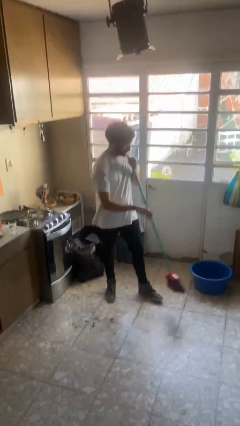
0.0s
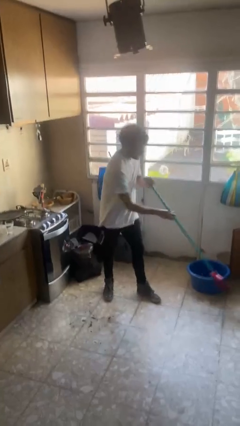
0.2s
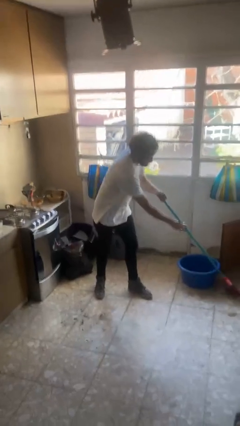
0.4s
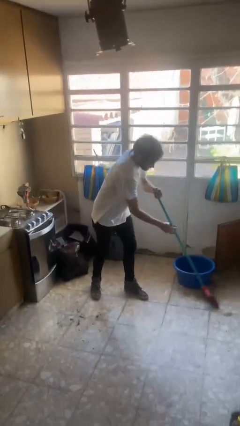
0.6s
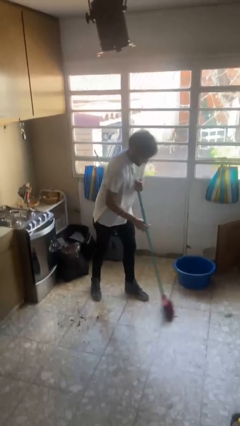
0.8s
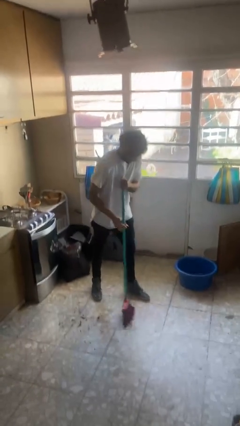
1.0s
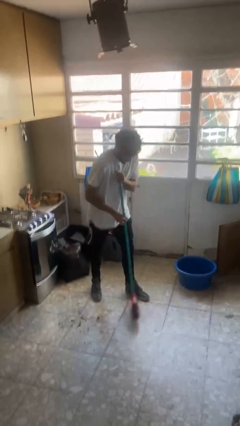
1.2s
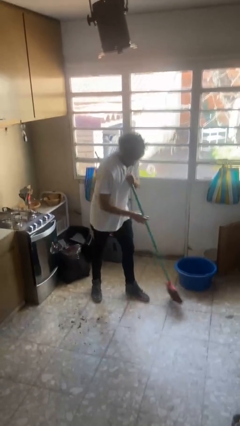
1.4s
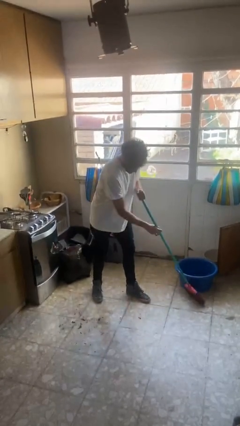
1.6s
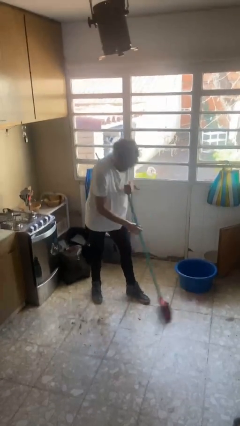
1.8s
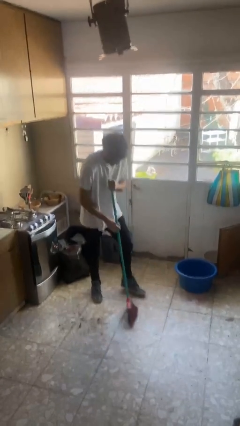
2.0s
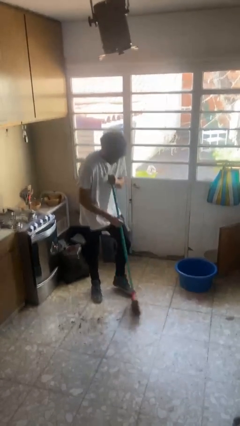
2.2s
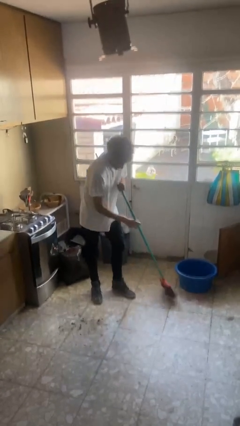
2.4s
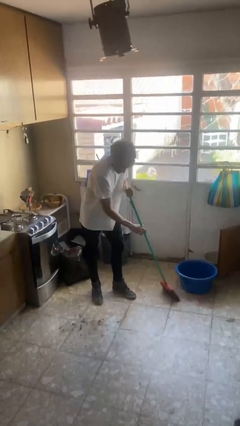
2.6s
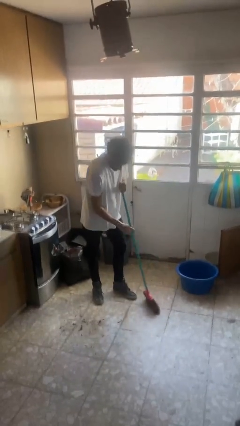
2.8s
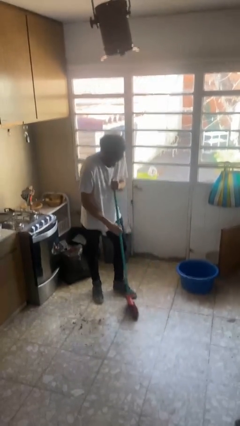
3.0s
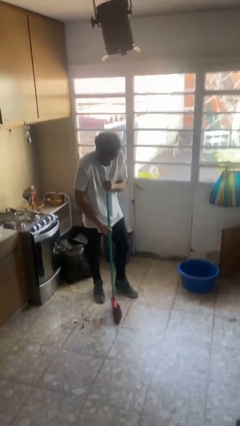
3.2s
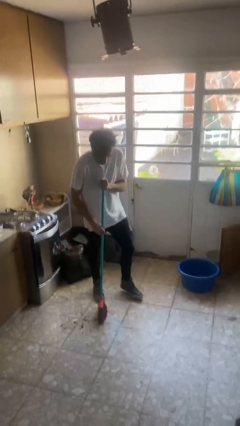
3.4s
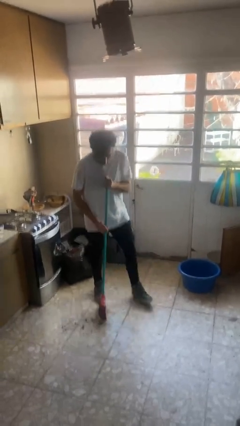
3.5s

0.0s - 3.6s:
person sweeps floor

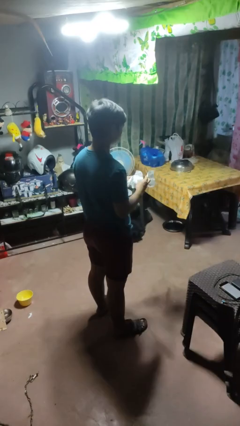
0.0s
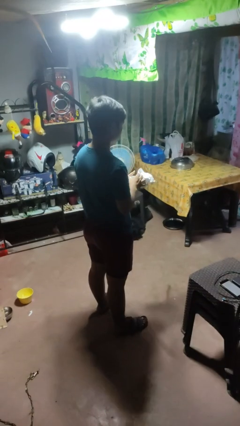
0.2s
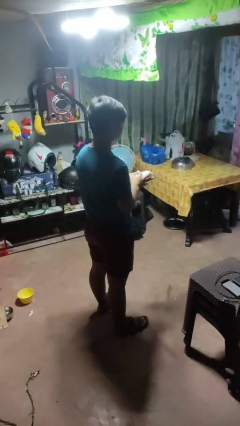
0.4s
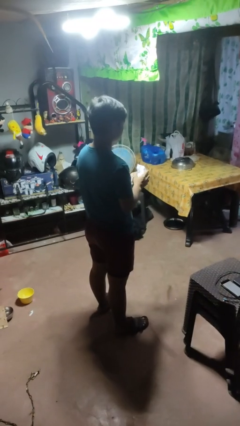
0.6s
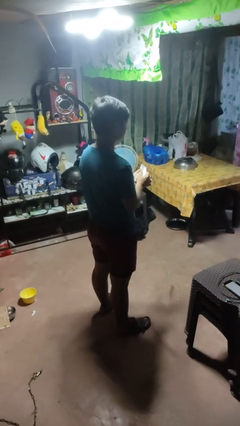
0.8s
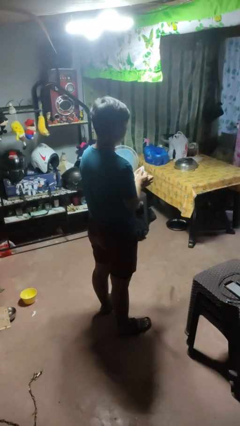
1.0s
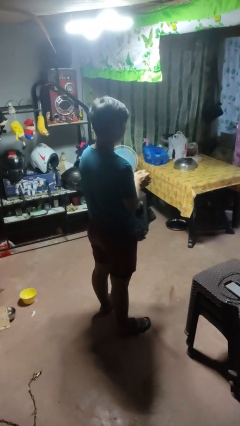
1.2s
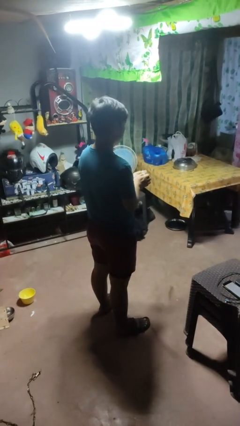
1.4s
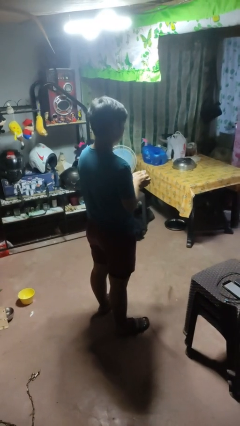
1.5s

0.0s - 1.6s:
person crumples paper

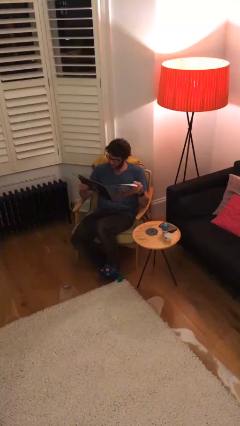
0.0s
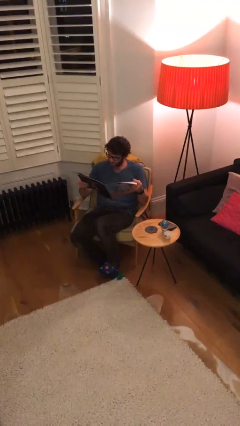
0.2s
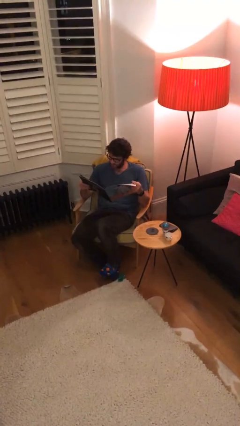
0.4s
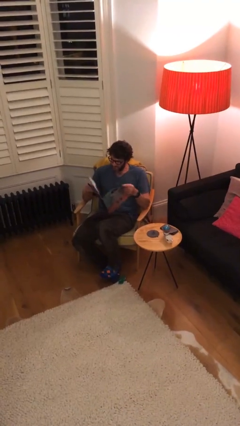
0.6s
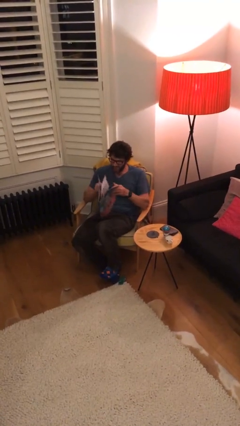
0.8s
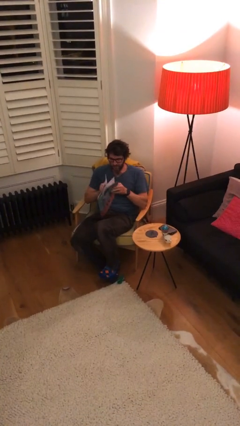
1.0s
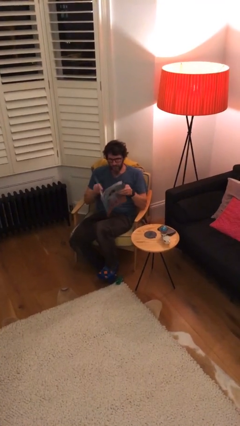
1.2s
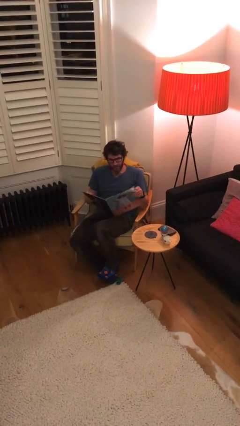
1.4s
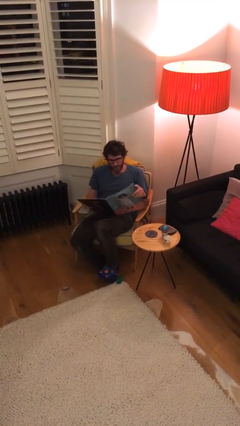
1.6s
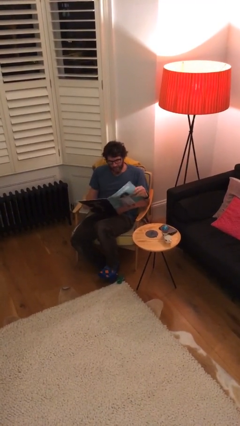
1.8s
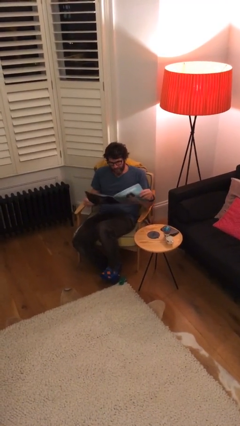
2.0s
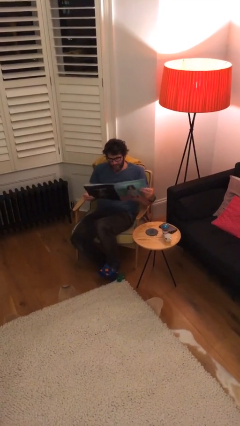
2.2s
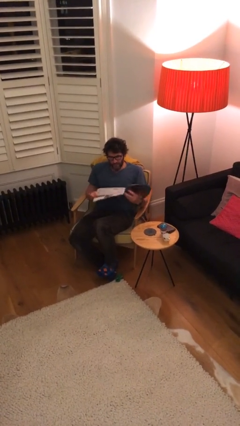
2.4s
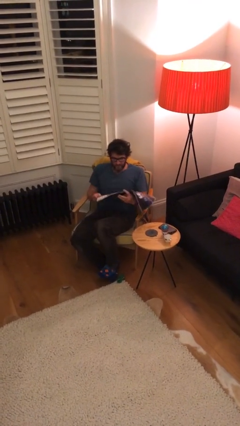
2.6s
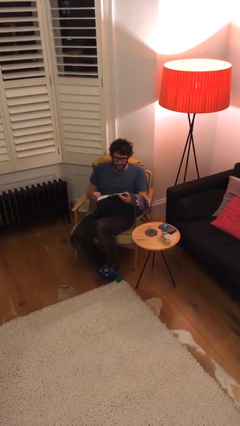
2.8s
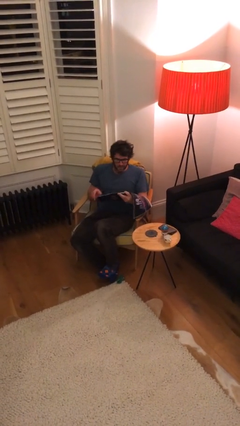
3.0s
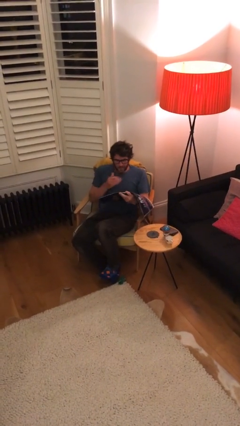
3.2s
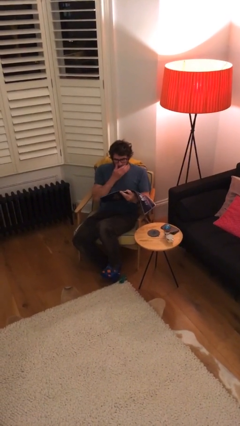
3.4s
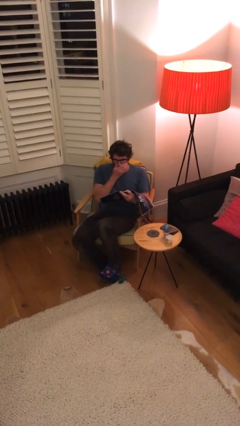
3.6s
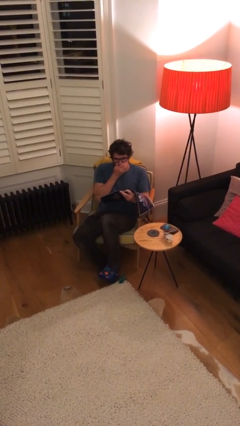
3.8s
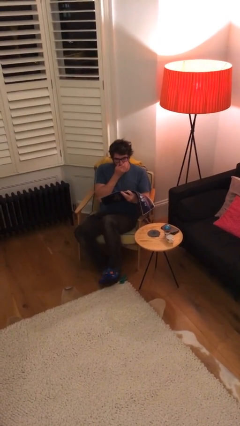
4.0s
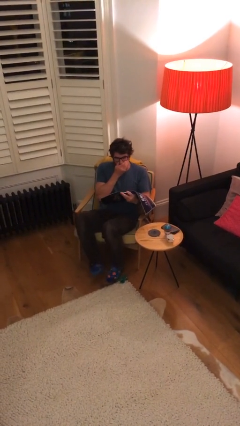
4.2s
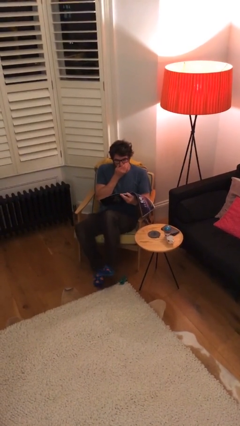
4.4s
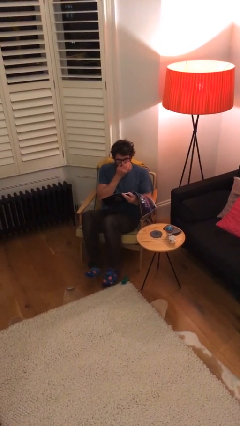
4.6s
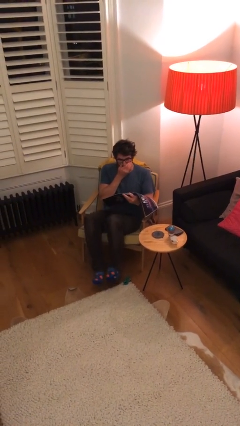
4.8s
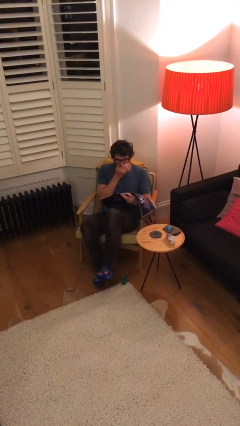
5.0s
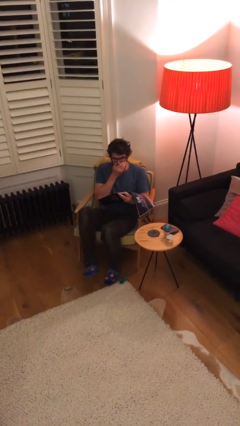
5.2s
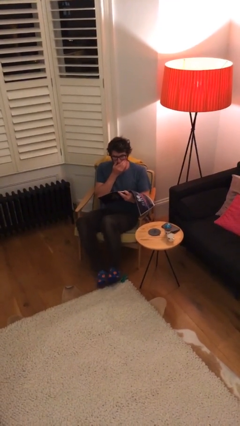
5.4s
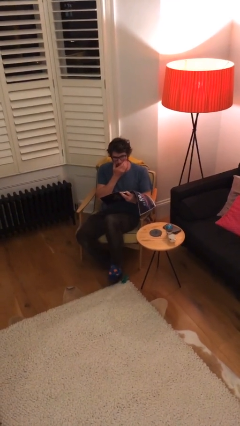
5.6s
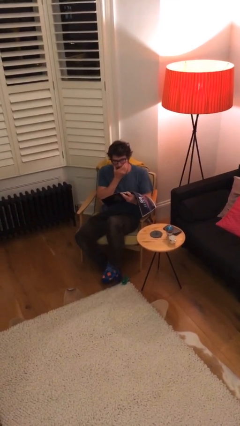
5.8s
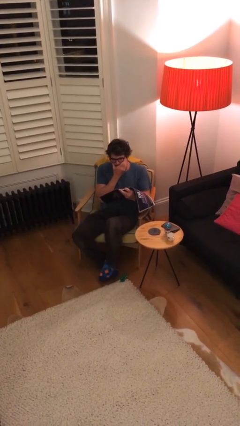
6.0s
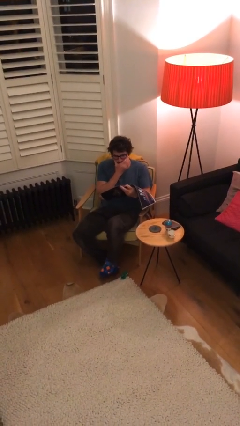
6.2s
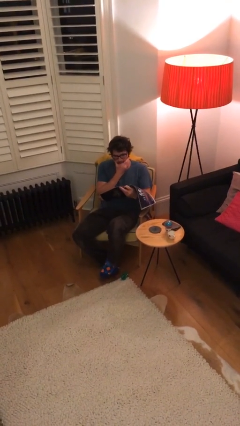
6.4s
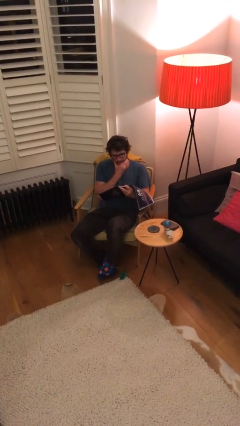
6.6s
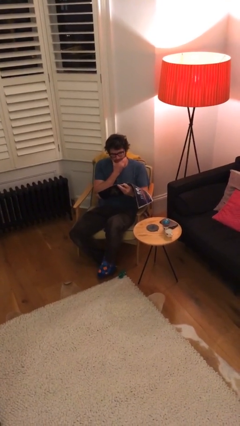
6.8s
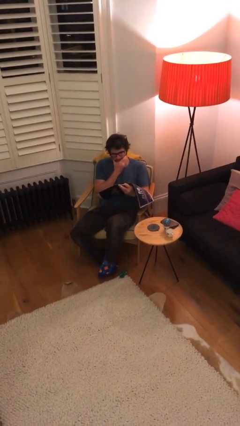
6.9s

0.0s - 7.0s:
person reads document

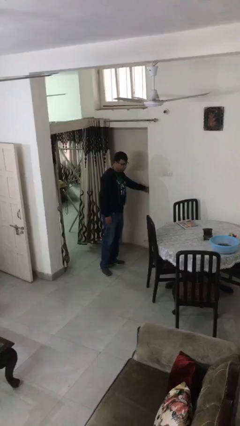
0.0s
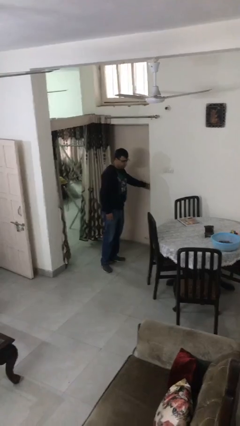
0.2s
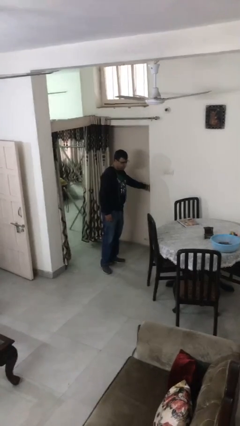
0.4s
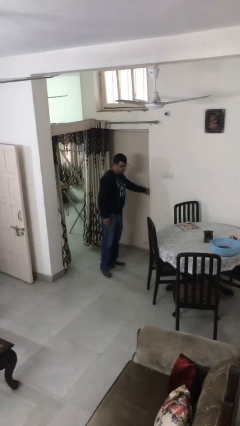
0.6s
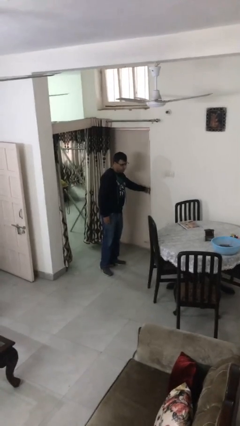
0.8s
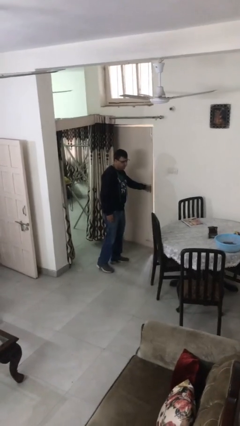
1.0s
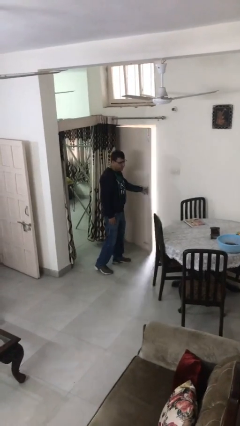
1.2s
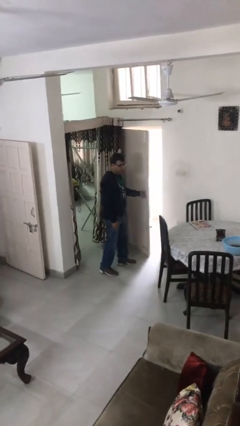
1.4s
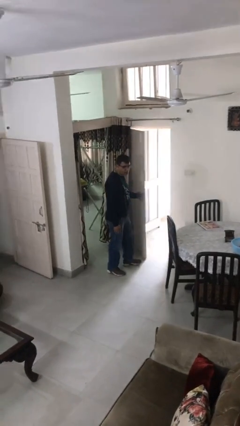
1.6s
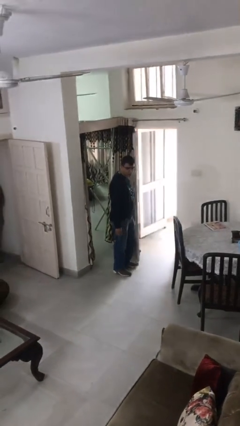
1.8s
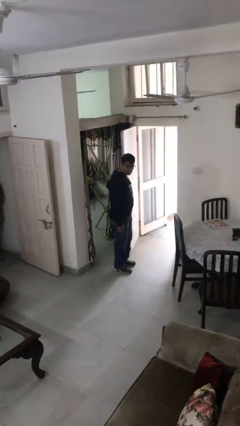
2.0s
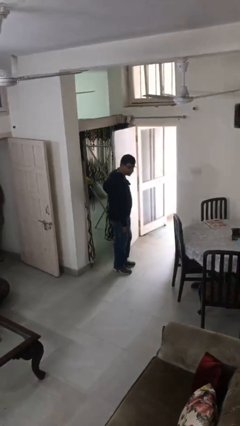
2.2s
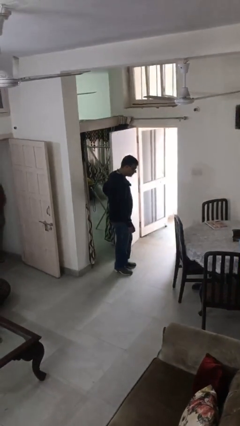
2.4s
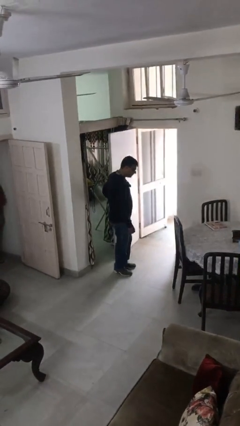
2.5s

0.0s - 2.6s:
person opens facility door

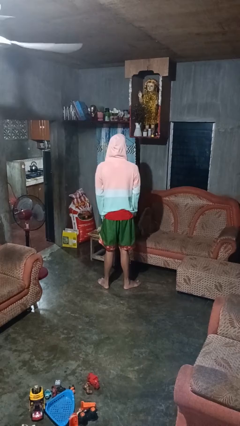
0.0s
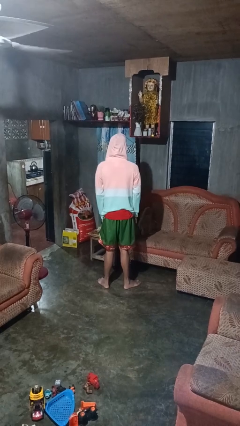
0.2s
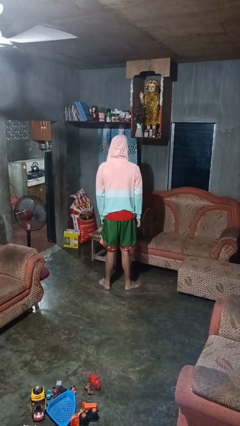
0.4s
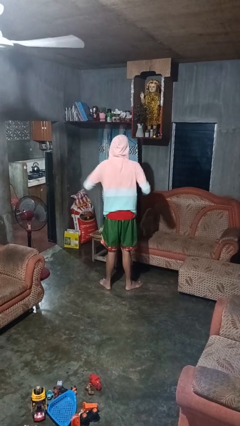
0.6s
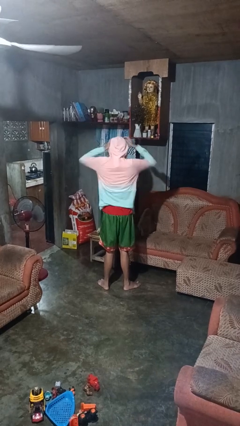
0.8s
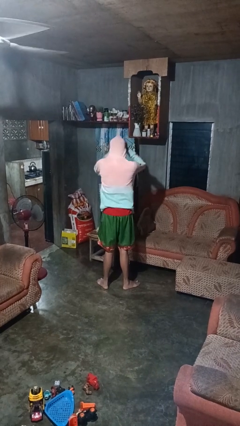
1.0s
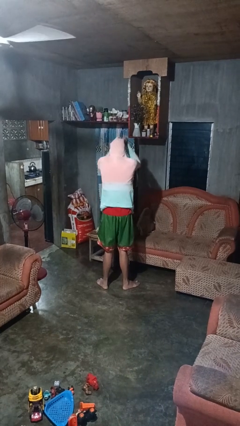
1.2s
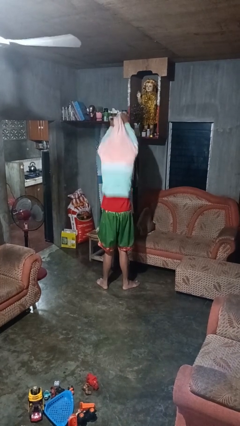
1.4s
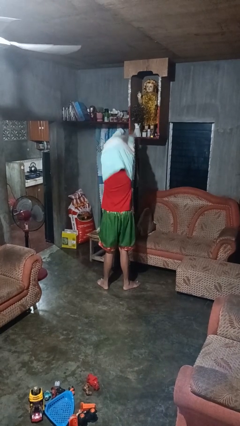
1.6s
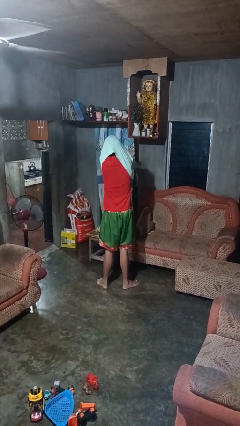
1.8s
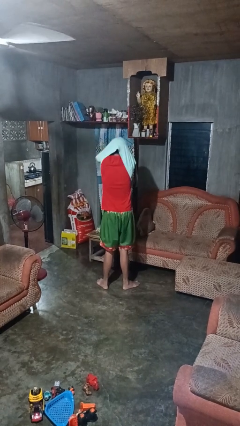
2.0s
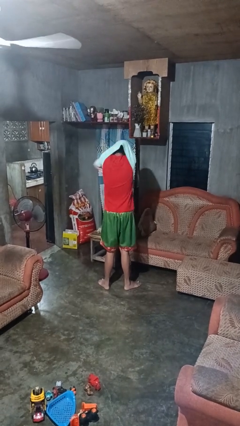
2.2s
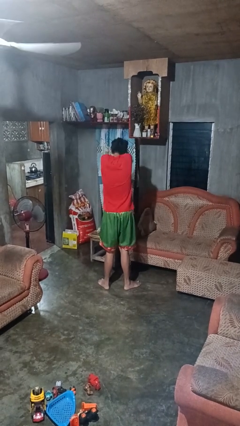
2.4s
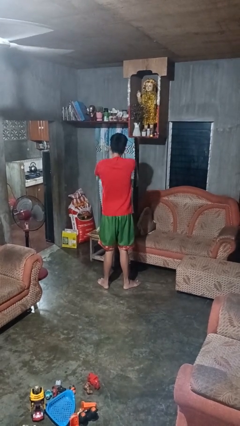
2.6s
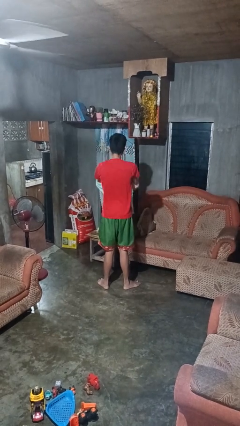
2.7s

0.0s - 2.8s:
person takes off hoodie

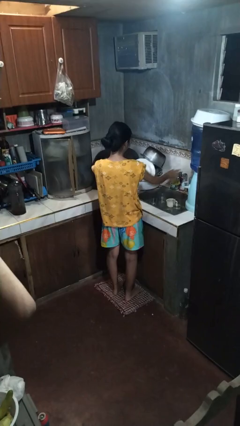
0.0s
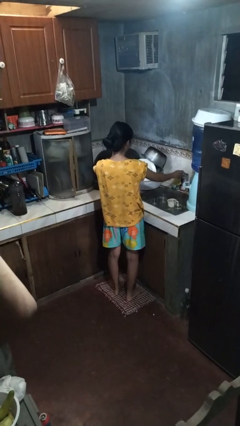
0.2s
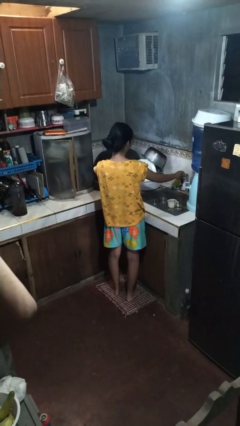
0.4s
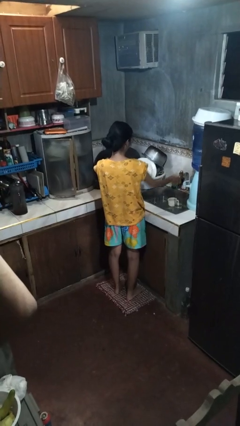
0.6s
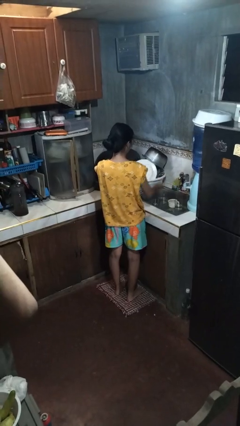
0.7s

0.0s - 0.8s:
person turns on faucet
